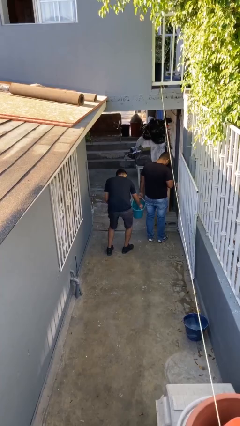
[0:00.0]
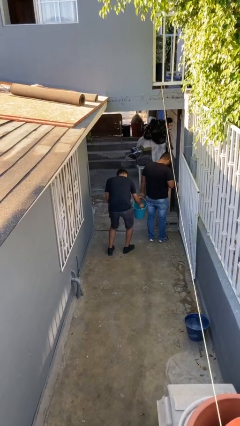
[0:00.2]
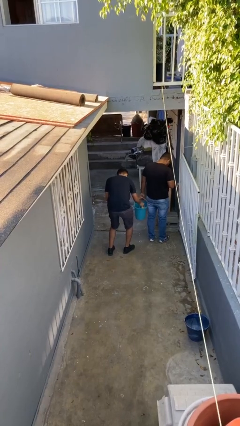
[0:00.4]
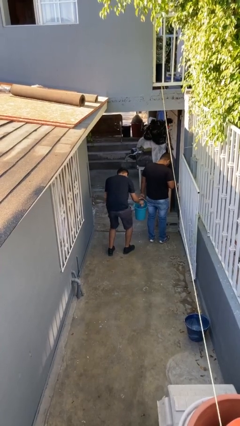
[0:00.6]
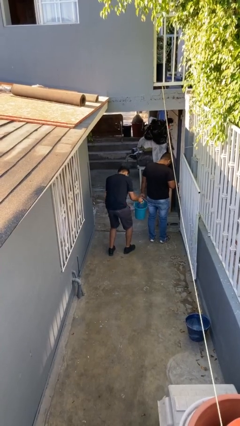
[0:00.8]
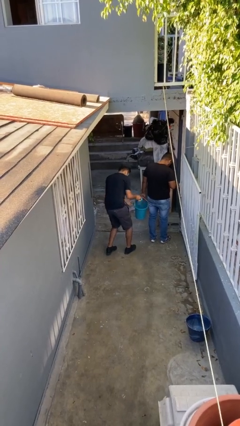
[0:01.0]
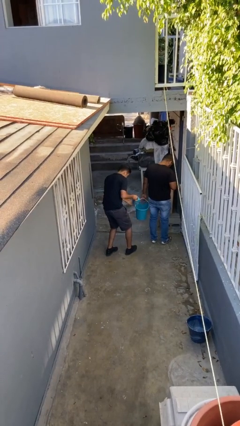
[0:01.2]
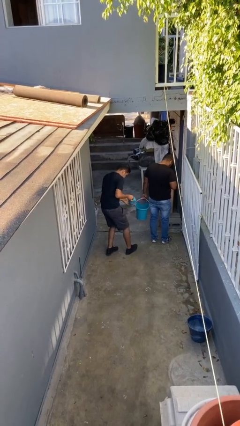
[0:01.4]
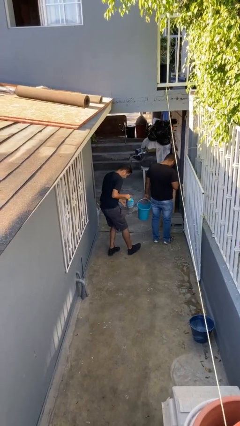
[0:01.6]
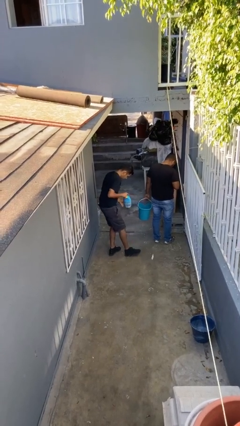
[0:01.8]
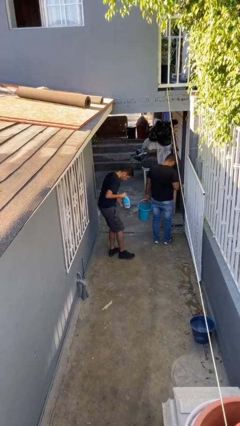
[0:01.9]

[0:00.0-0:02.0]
person steals object from person

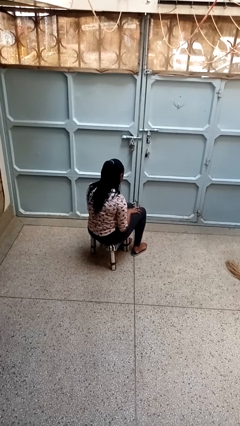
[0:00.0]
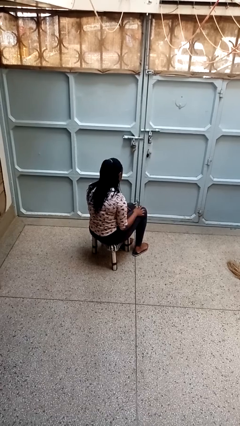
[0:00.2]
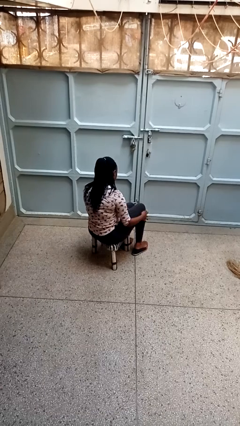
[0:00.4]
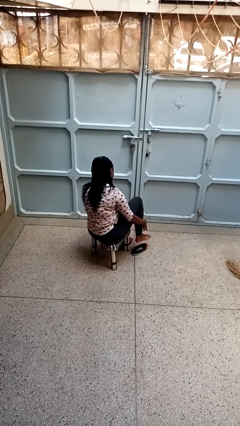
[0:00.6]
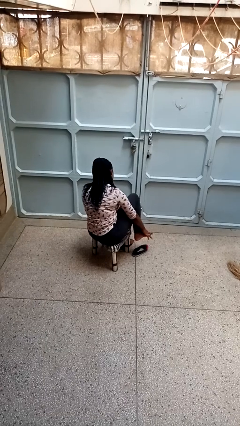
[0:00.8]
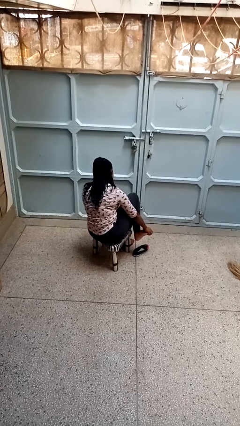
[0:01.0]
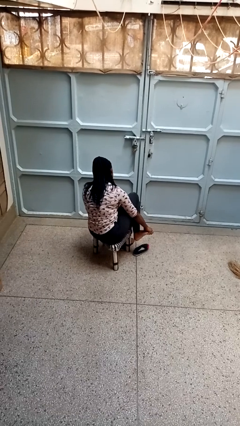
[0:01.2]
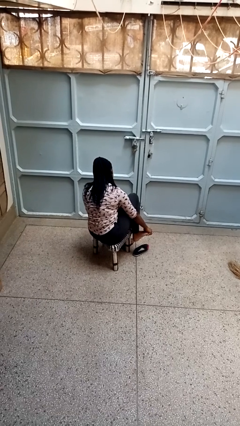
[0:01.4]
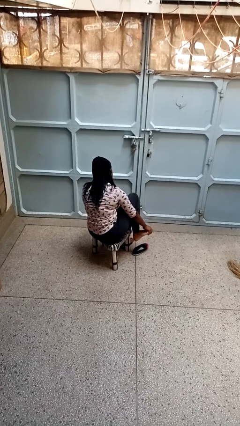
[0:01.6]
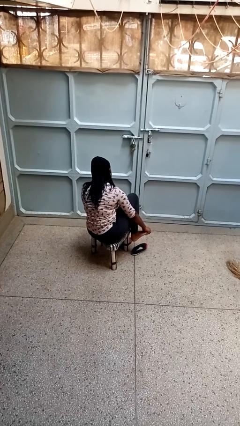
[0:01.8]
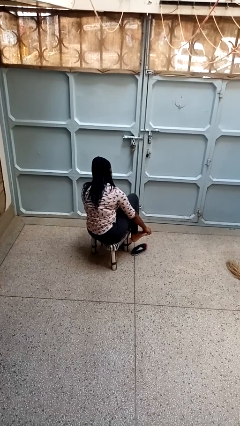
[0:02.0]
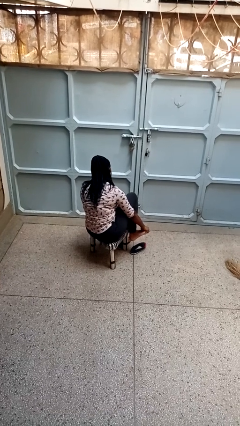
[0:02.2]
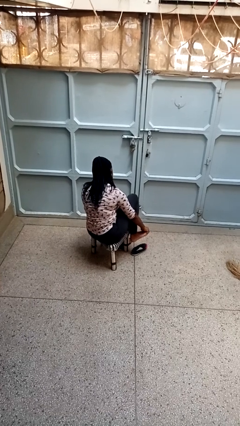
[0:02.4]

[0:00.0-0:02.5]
person rubs foot

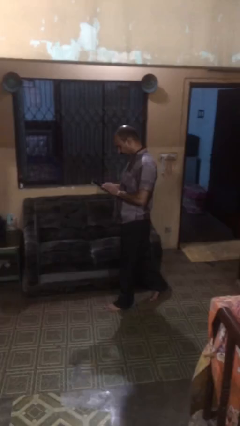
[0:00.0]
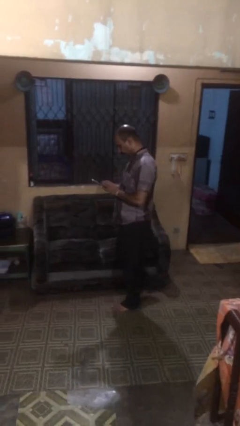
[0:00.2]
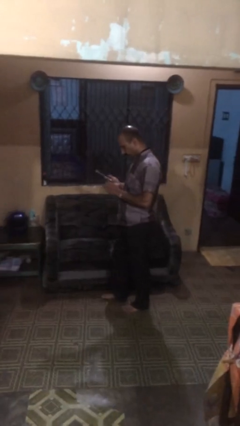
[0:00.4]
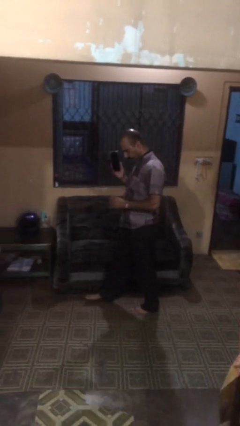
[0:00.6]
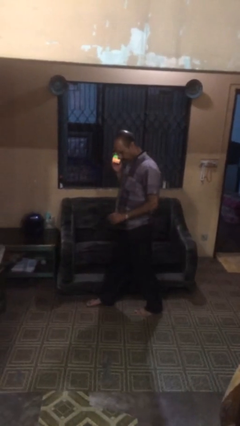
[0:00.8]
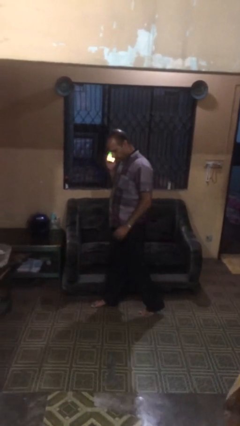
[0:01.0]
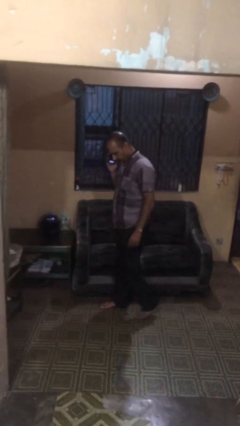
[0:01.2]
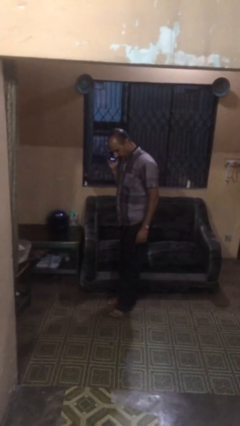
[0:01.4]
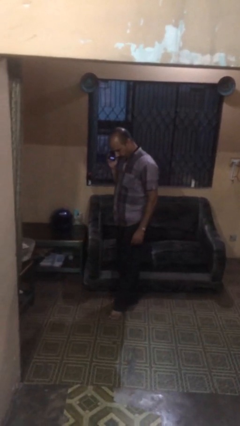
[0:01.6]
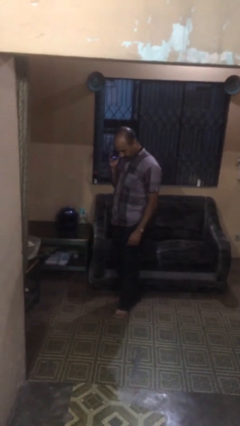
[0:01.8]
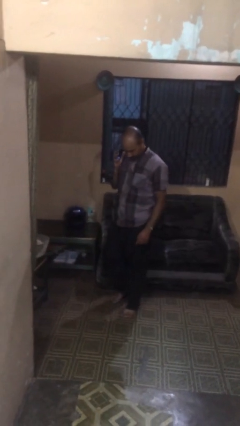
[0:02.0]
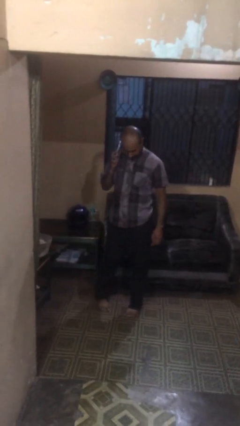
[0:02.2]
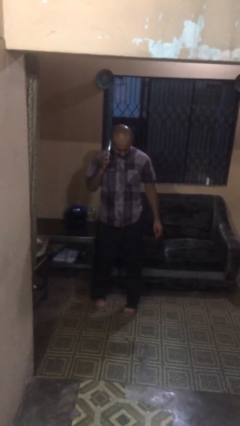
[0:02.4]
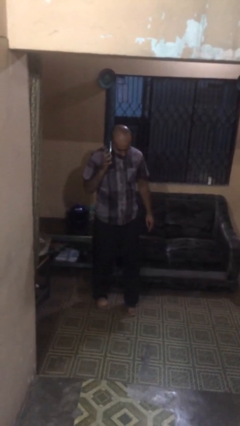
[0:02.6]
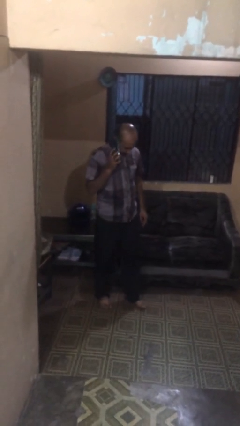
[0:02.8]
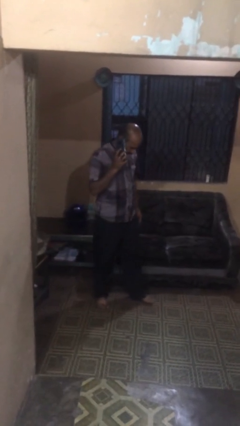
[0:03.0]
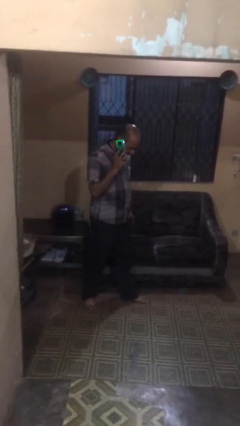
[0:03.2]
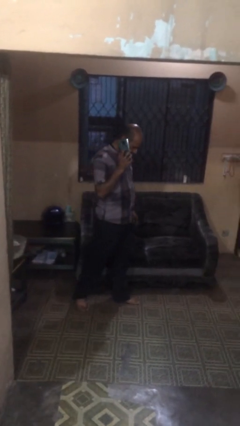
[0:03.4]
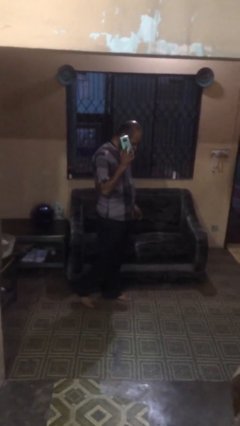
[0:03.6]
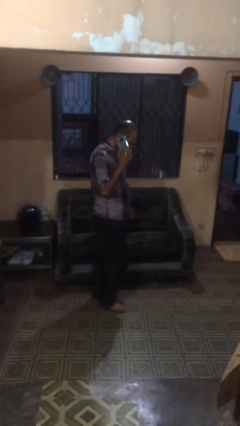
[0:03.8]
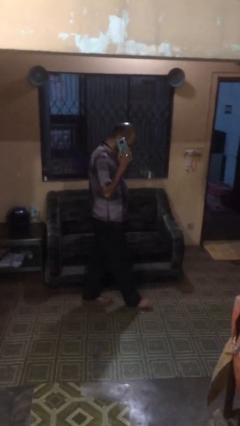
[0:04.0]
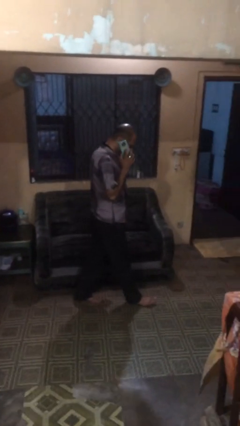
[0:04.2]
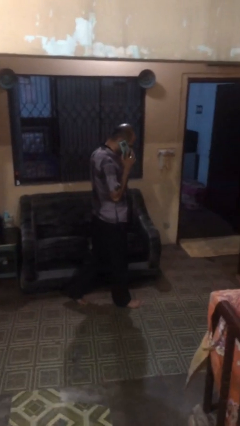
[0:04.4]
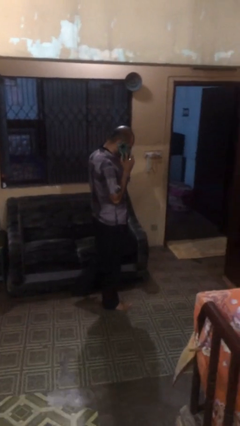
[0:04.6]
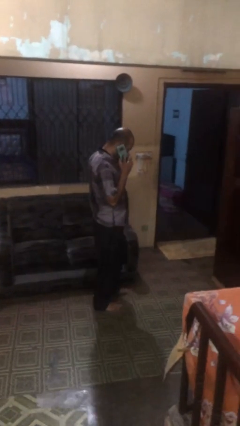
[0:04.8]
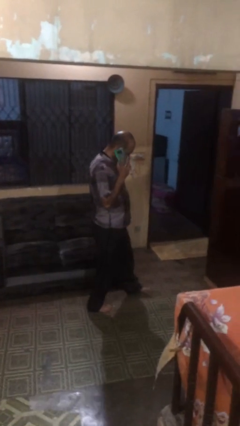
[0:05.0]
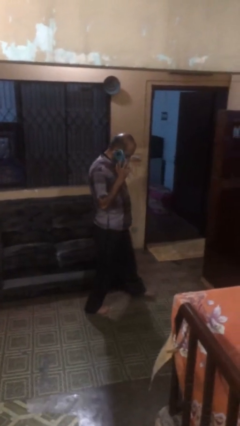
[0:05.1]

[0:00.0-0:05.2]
person talks on phone

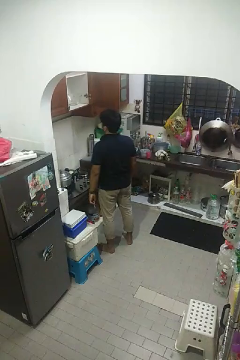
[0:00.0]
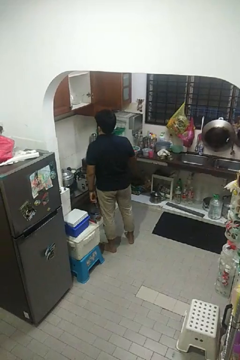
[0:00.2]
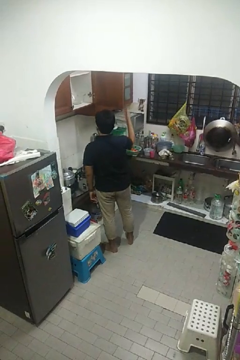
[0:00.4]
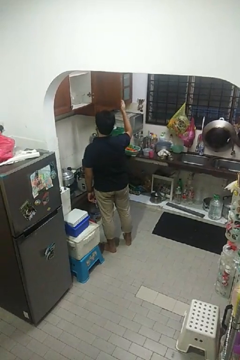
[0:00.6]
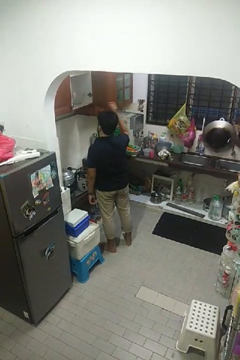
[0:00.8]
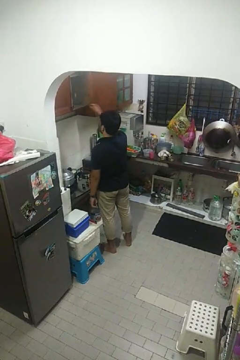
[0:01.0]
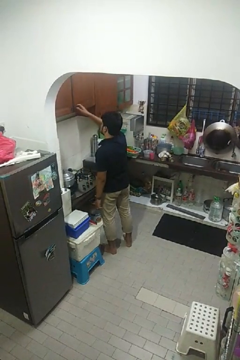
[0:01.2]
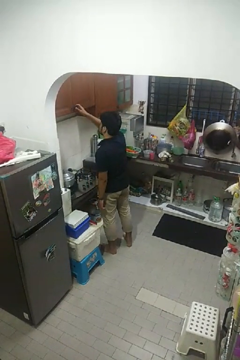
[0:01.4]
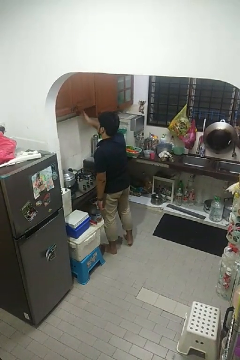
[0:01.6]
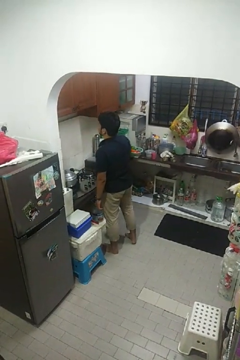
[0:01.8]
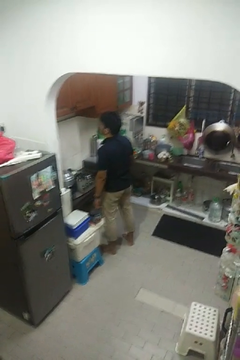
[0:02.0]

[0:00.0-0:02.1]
person closes cabinet

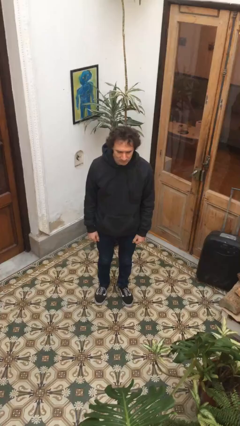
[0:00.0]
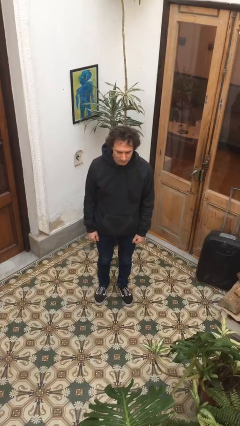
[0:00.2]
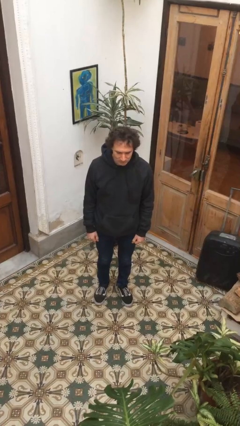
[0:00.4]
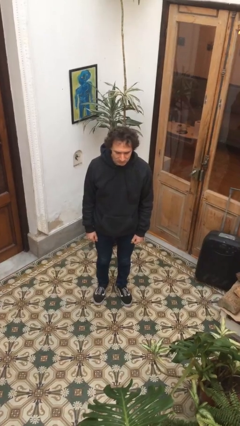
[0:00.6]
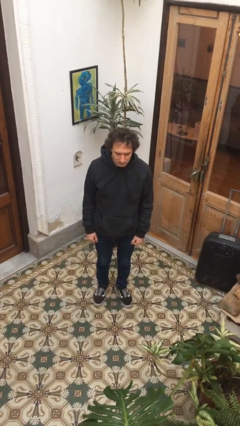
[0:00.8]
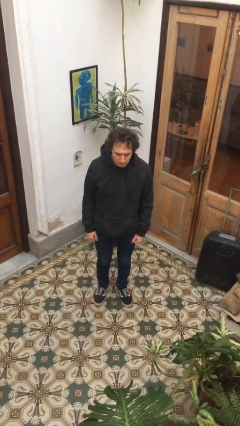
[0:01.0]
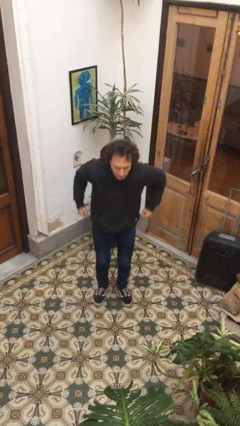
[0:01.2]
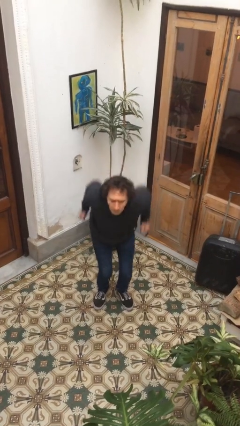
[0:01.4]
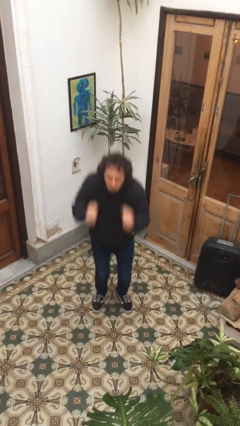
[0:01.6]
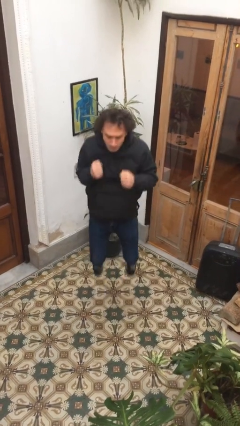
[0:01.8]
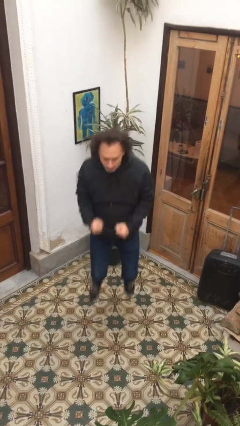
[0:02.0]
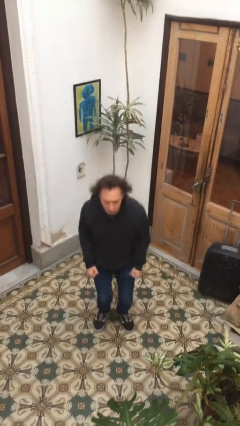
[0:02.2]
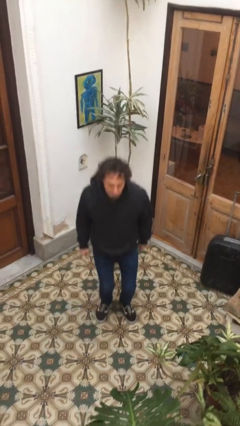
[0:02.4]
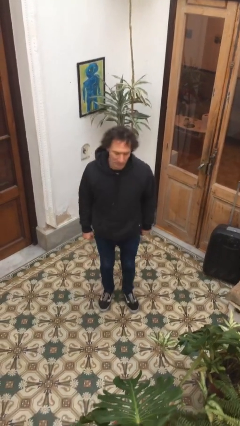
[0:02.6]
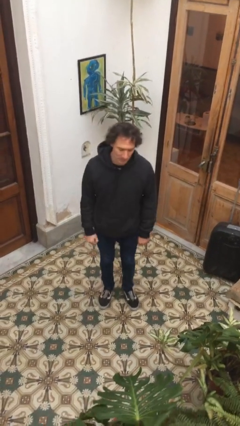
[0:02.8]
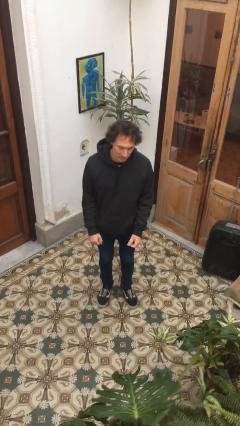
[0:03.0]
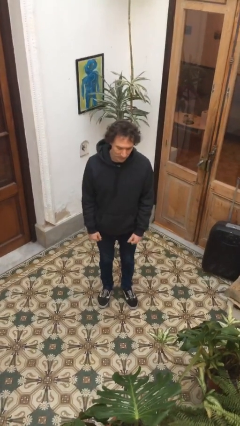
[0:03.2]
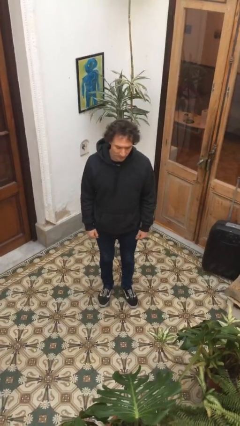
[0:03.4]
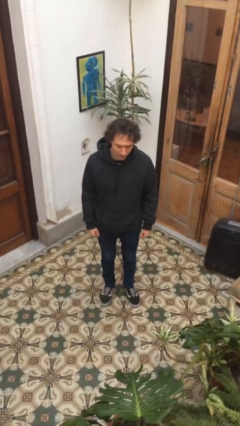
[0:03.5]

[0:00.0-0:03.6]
person jumps

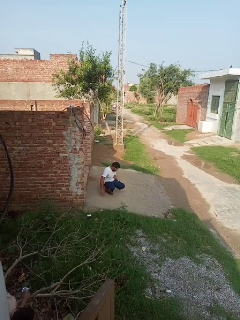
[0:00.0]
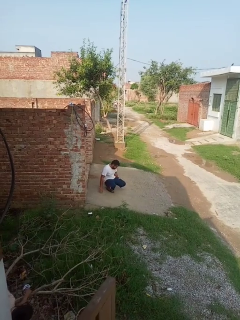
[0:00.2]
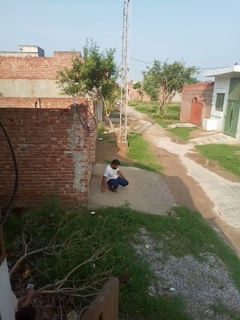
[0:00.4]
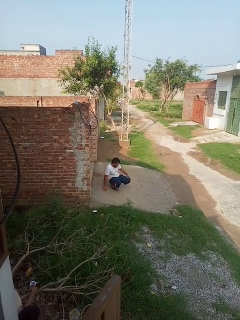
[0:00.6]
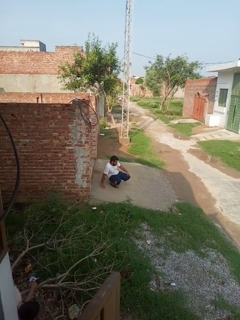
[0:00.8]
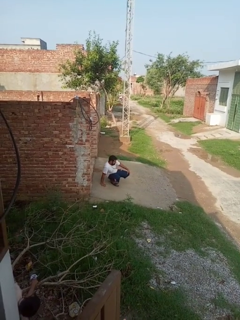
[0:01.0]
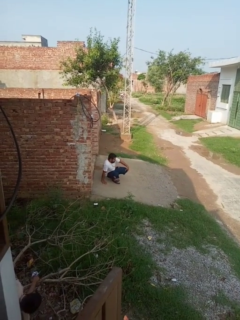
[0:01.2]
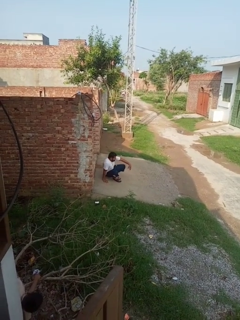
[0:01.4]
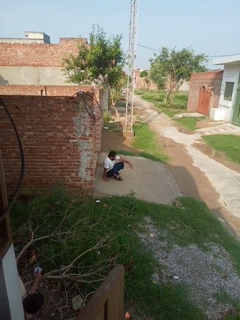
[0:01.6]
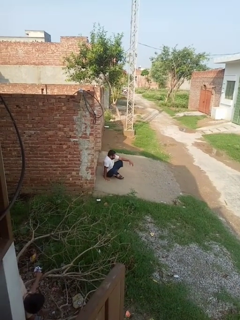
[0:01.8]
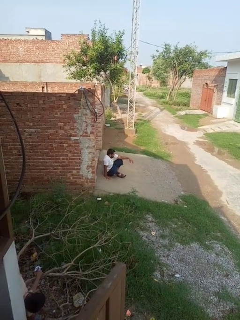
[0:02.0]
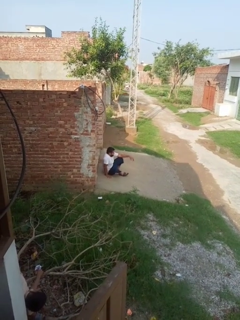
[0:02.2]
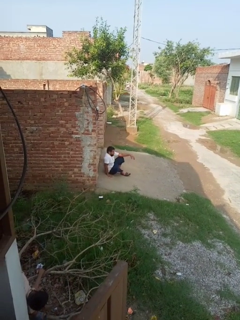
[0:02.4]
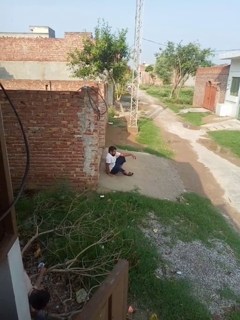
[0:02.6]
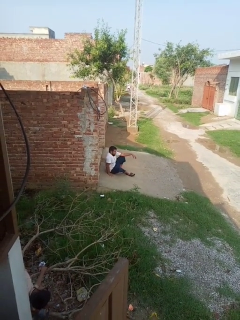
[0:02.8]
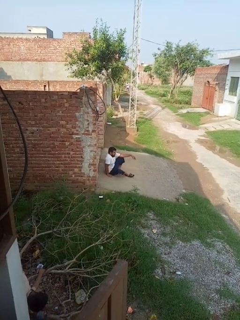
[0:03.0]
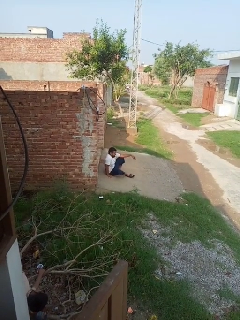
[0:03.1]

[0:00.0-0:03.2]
person lies down on floor

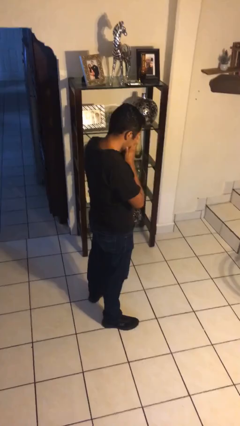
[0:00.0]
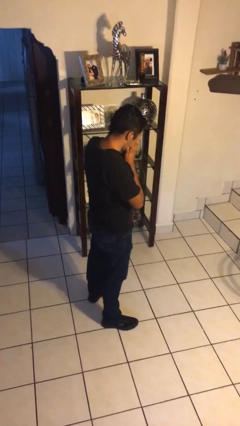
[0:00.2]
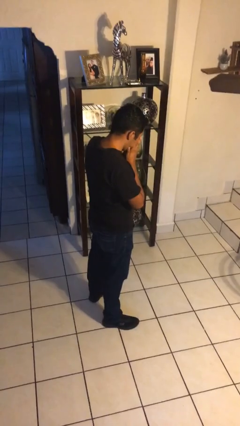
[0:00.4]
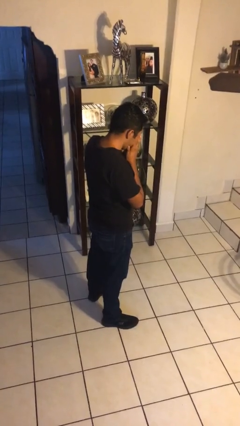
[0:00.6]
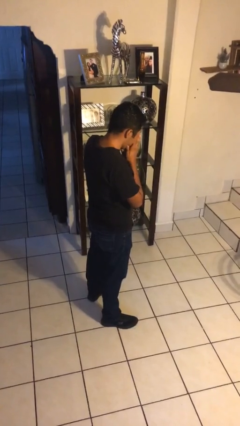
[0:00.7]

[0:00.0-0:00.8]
person sneezes into hand
